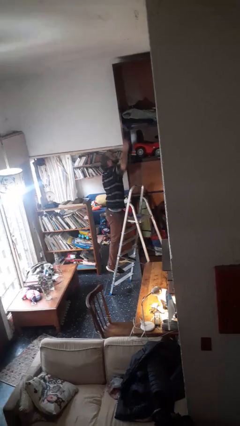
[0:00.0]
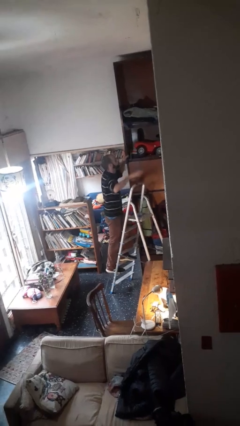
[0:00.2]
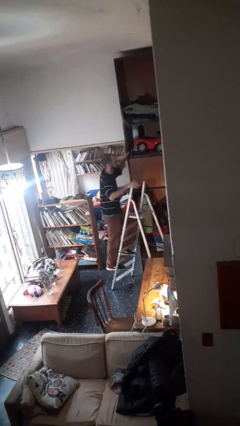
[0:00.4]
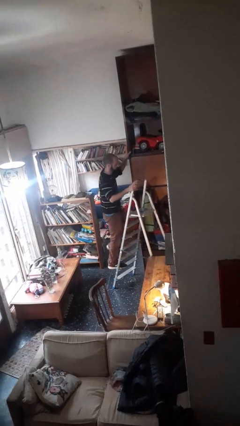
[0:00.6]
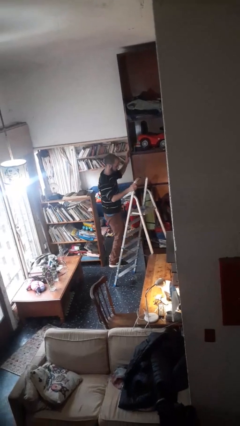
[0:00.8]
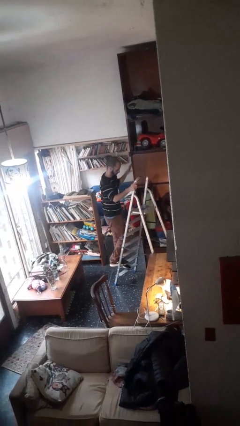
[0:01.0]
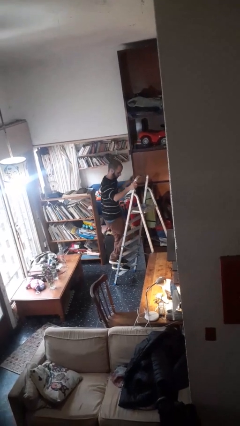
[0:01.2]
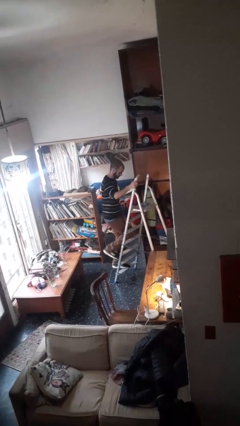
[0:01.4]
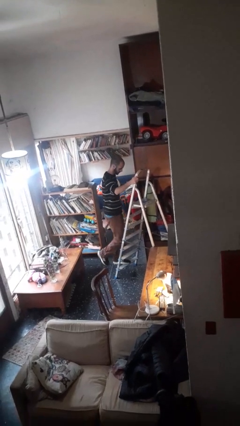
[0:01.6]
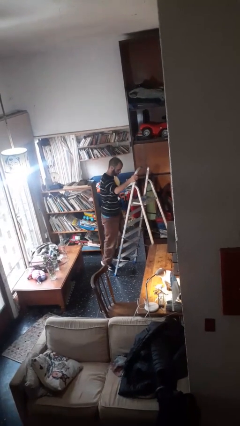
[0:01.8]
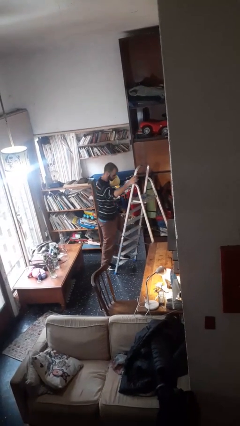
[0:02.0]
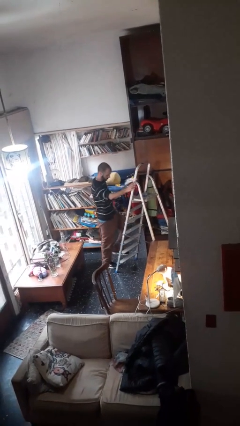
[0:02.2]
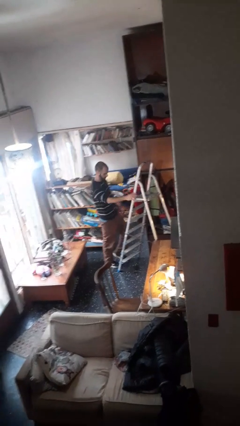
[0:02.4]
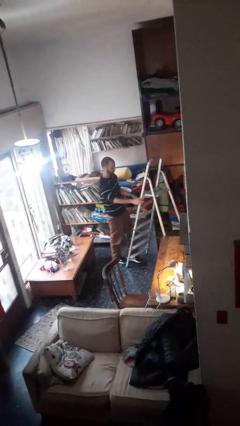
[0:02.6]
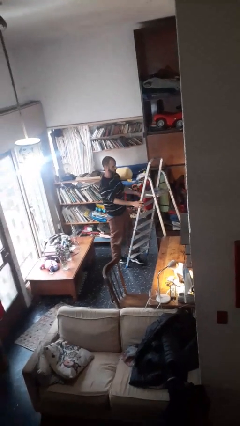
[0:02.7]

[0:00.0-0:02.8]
person climbs down ladder

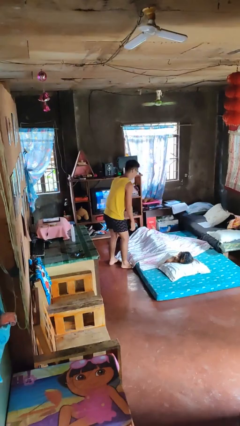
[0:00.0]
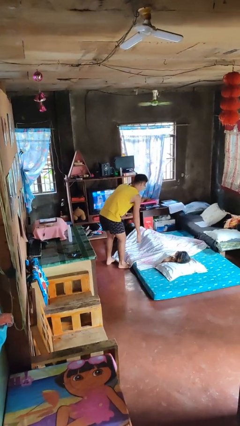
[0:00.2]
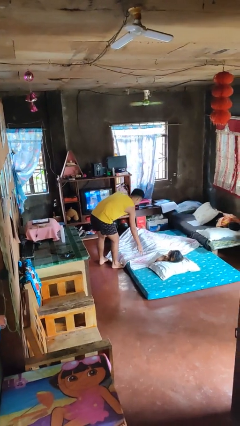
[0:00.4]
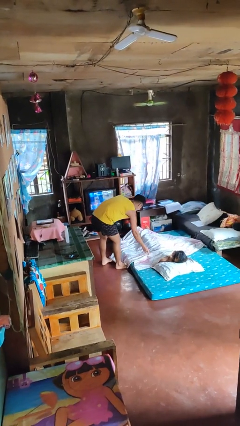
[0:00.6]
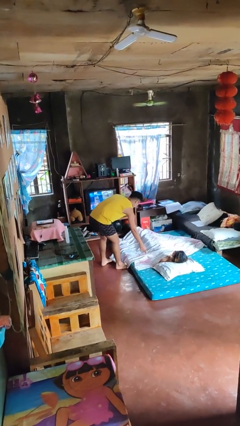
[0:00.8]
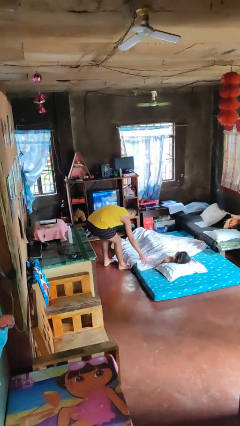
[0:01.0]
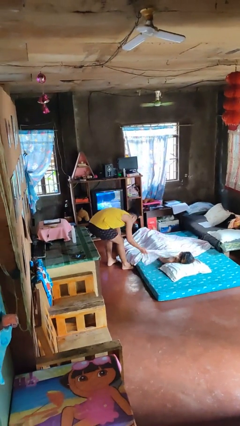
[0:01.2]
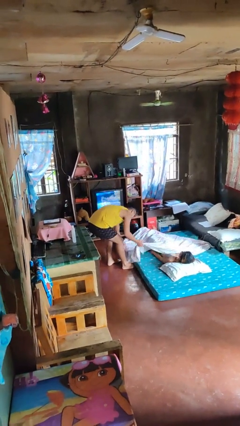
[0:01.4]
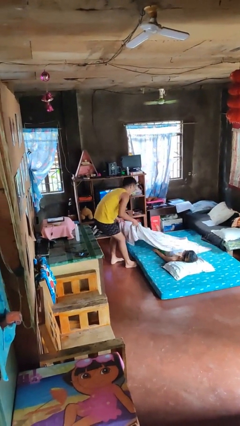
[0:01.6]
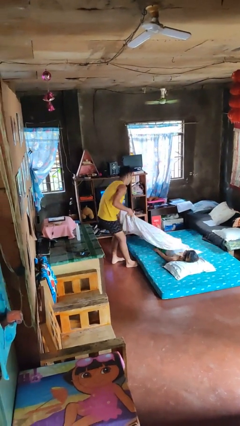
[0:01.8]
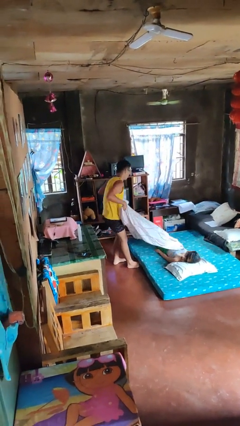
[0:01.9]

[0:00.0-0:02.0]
person uncovers friend with blanket

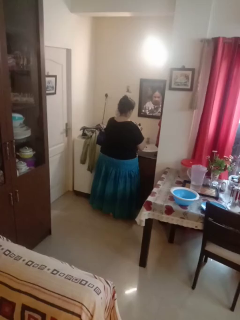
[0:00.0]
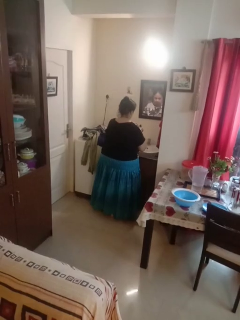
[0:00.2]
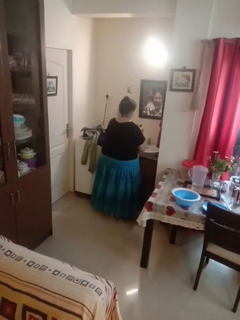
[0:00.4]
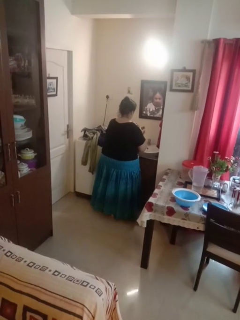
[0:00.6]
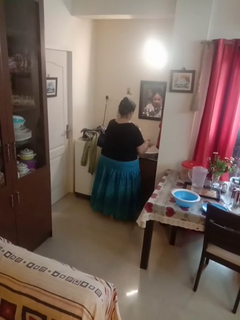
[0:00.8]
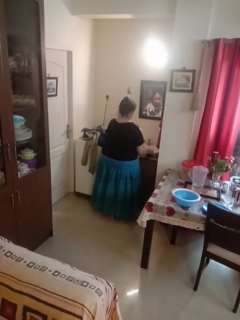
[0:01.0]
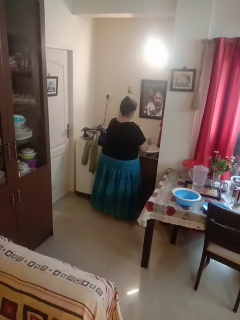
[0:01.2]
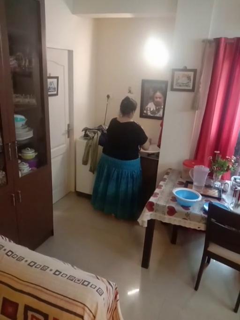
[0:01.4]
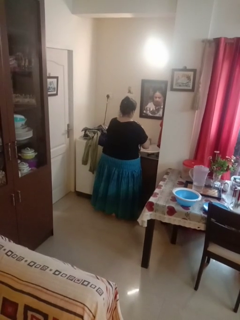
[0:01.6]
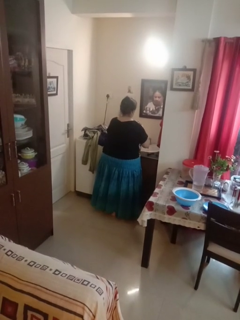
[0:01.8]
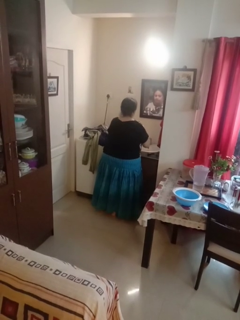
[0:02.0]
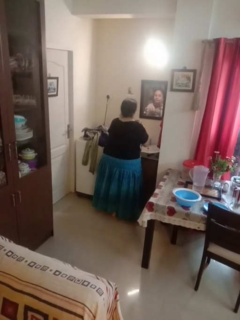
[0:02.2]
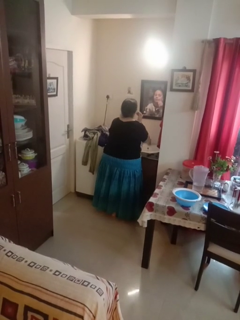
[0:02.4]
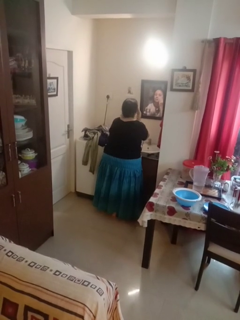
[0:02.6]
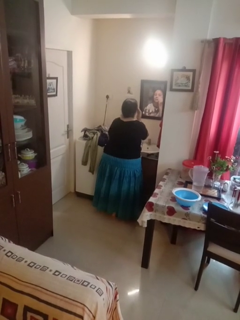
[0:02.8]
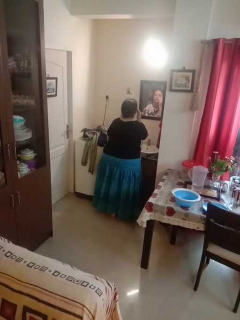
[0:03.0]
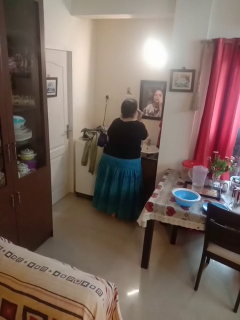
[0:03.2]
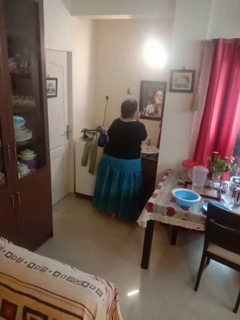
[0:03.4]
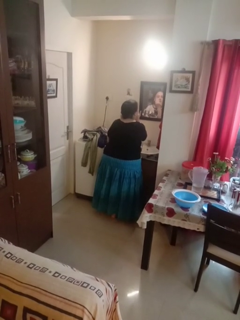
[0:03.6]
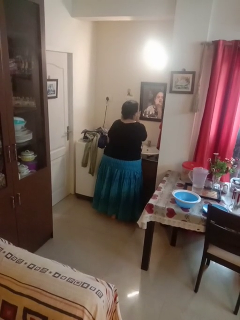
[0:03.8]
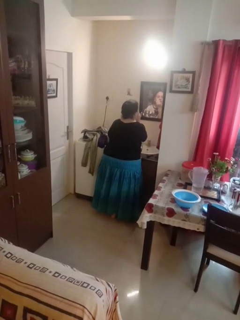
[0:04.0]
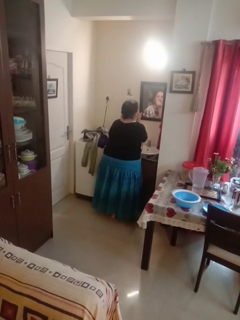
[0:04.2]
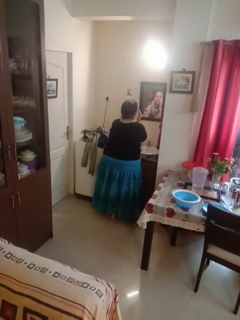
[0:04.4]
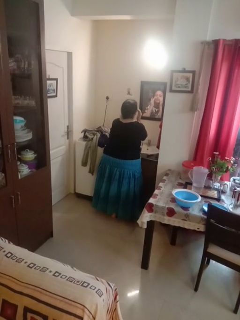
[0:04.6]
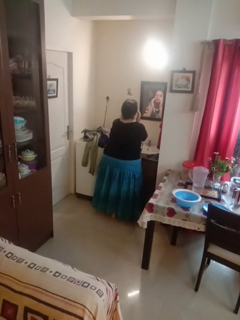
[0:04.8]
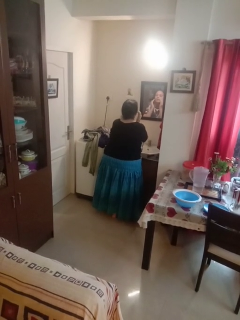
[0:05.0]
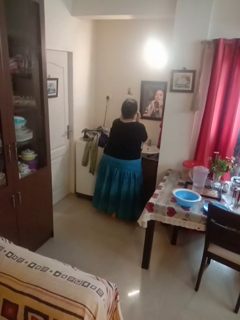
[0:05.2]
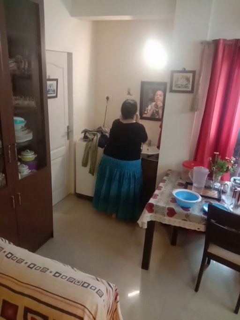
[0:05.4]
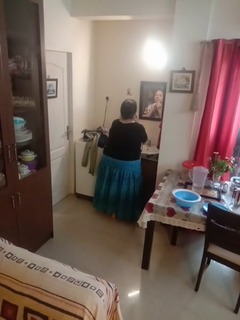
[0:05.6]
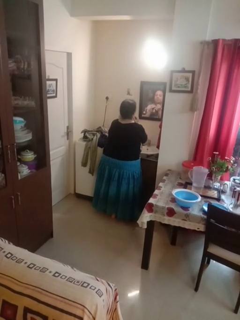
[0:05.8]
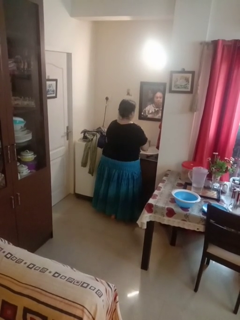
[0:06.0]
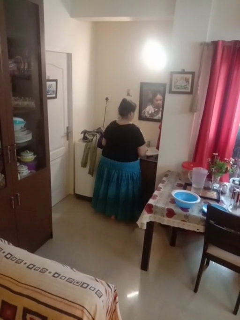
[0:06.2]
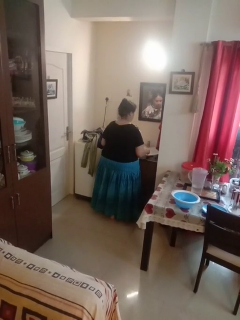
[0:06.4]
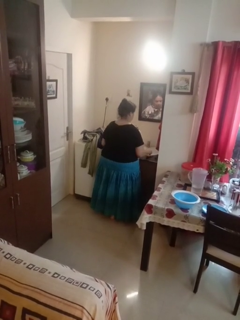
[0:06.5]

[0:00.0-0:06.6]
person applies foundation makeup

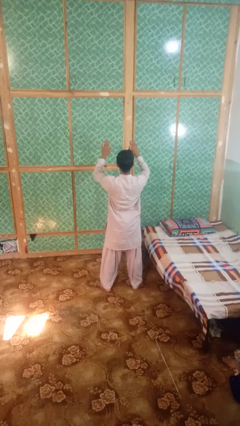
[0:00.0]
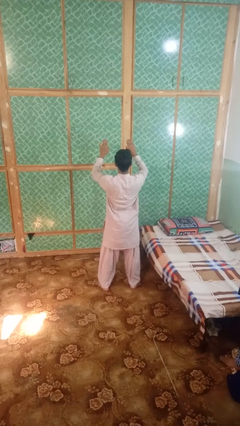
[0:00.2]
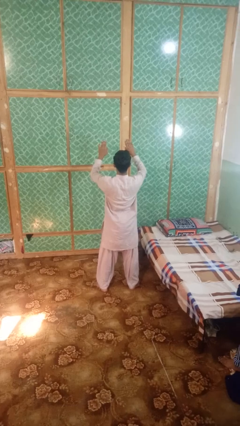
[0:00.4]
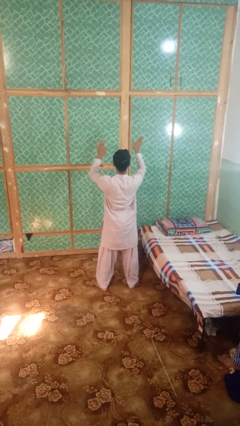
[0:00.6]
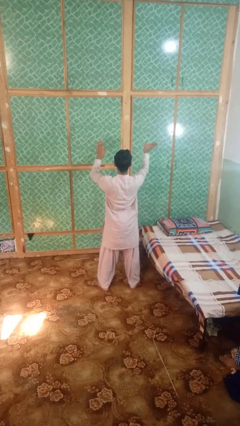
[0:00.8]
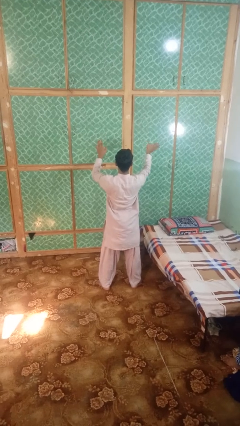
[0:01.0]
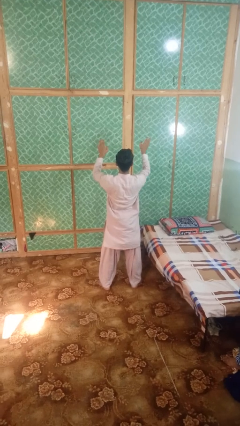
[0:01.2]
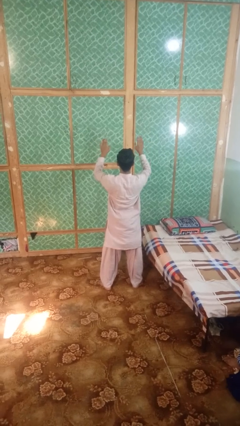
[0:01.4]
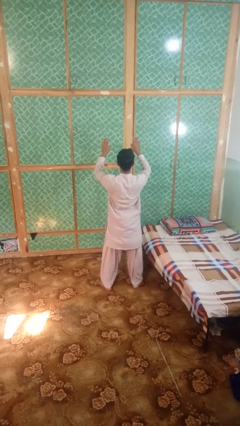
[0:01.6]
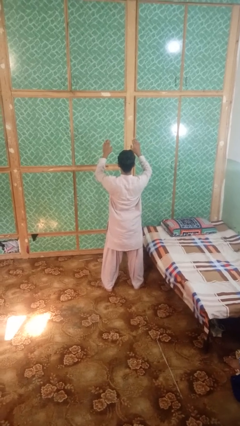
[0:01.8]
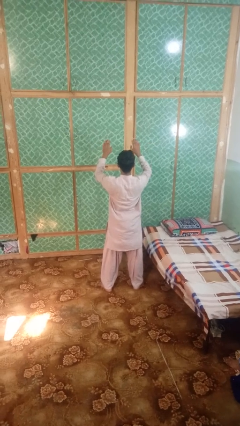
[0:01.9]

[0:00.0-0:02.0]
person gestures swipe right

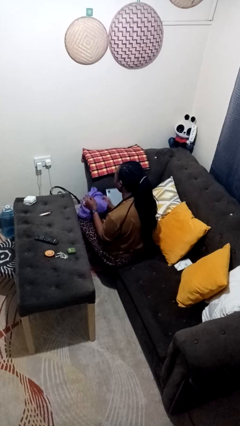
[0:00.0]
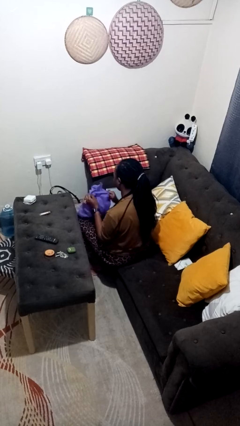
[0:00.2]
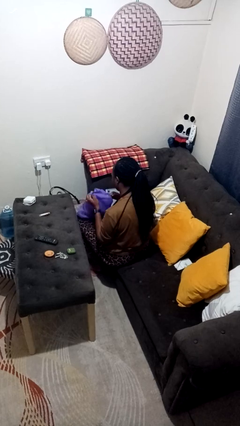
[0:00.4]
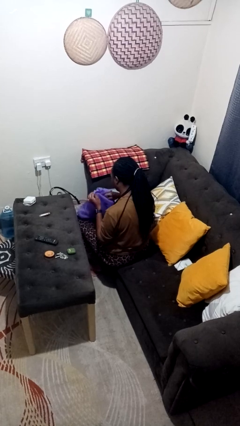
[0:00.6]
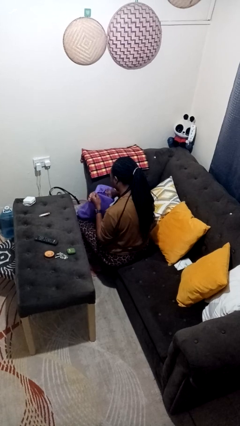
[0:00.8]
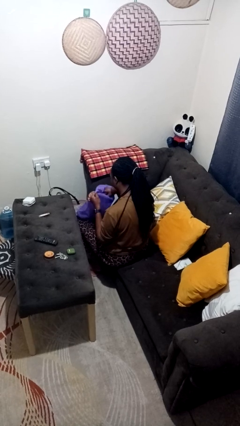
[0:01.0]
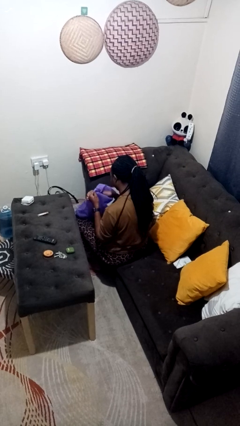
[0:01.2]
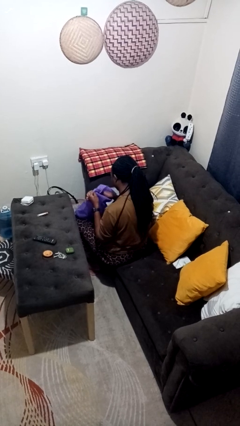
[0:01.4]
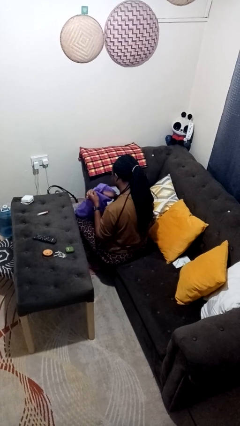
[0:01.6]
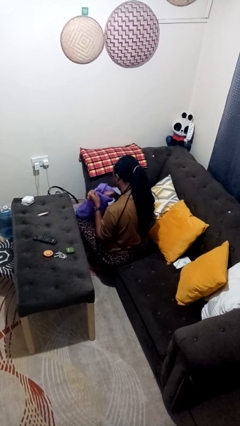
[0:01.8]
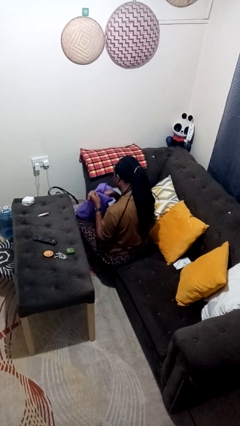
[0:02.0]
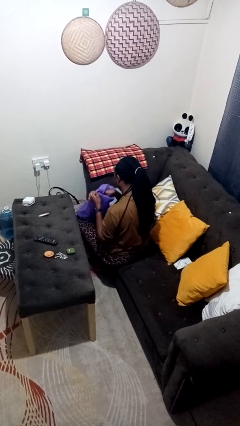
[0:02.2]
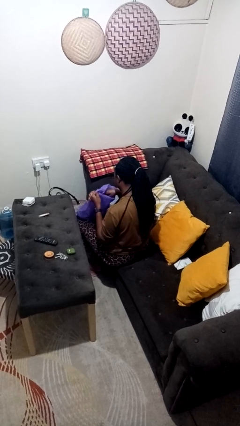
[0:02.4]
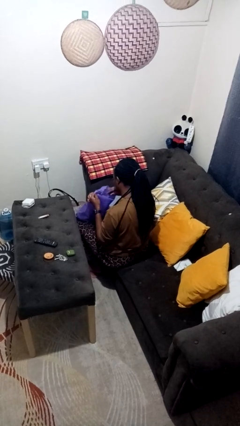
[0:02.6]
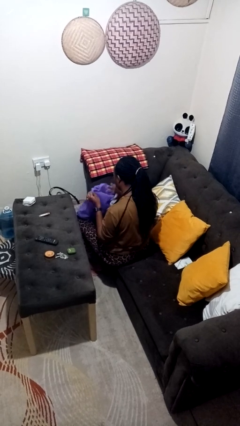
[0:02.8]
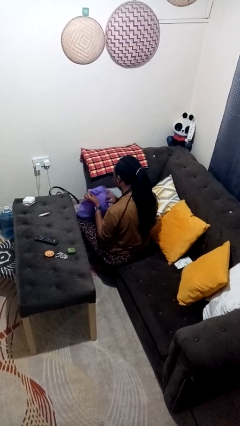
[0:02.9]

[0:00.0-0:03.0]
person searches in bag

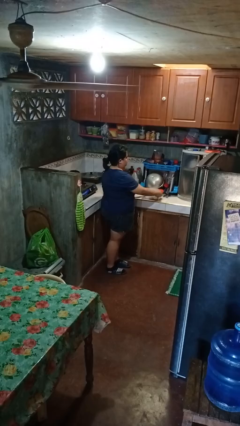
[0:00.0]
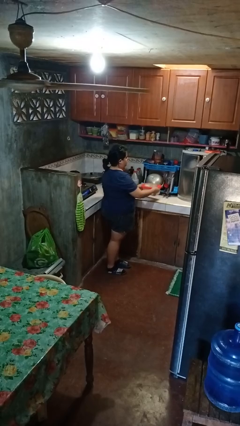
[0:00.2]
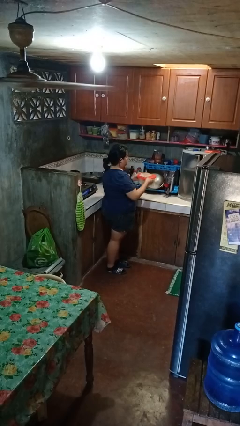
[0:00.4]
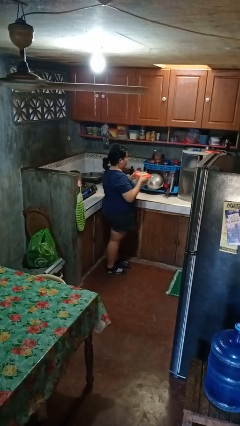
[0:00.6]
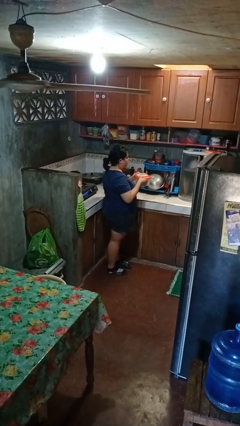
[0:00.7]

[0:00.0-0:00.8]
person picks up object from countertop

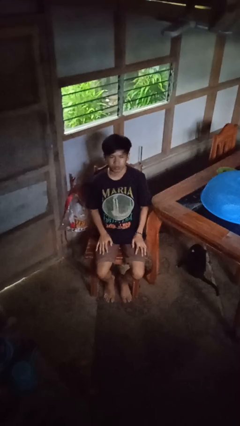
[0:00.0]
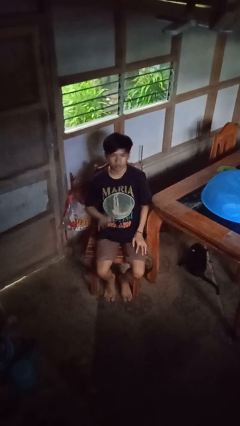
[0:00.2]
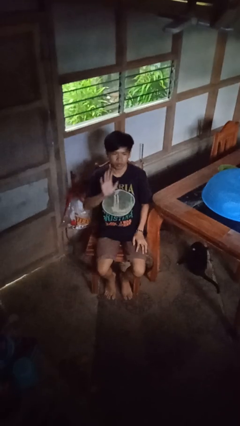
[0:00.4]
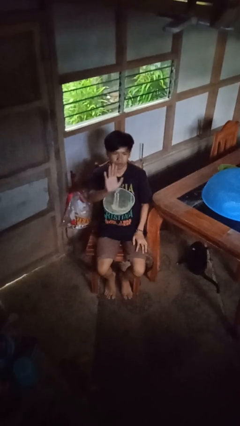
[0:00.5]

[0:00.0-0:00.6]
person gestures stop

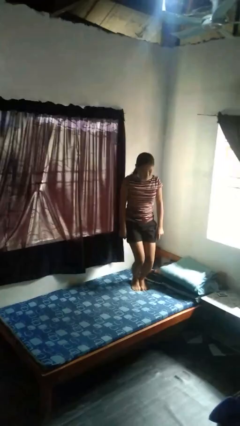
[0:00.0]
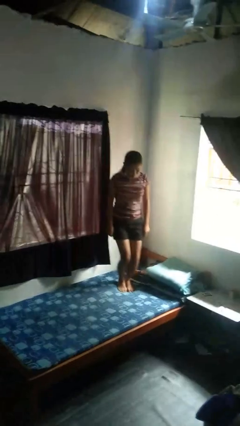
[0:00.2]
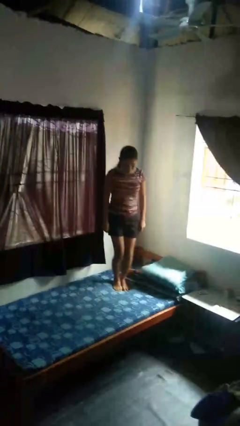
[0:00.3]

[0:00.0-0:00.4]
person jumps on bed
